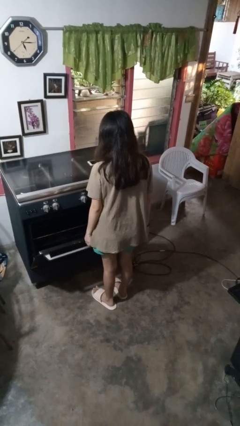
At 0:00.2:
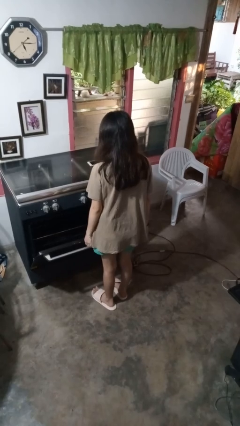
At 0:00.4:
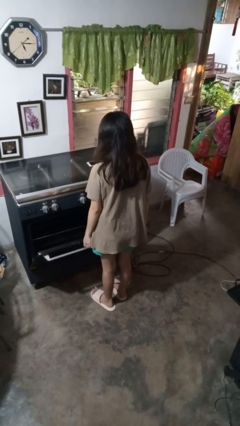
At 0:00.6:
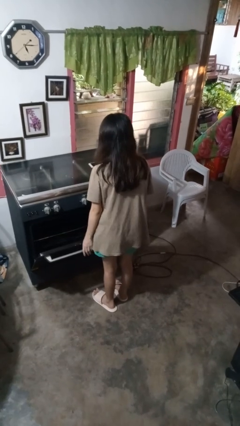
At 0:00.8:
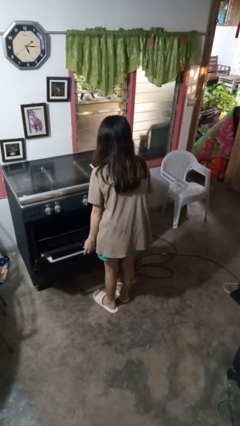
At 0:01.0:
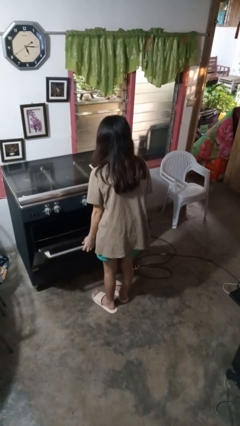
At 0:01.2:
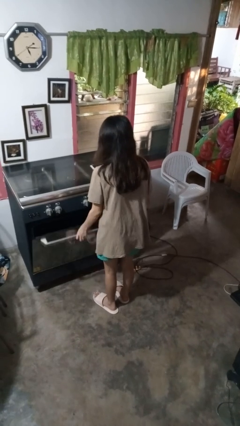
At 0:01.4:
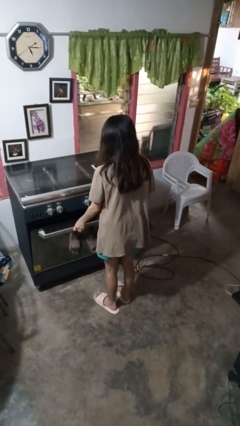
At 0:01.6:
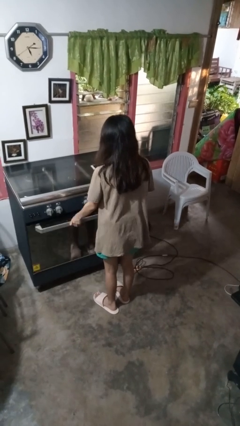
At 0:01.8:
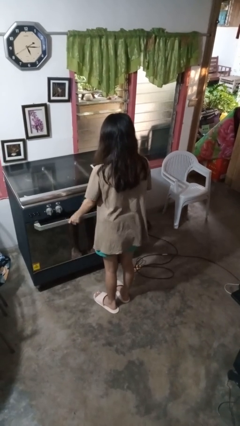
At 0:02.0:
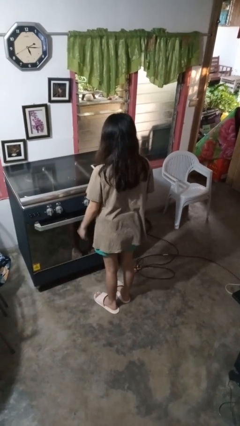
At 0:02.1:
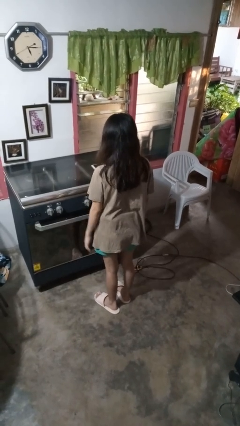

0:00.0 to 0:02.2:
person closes oven door

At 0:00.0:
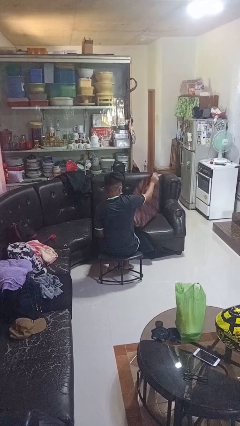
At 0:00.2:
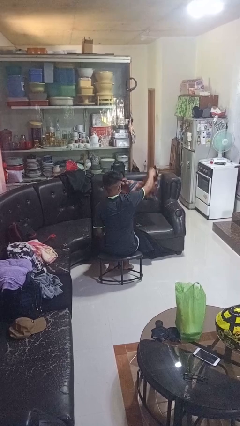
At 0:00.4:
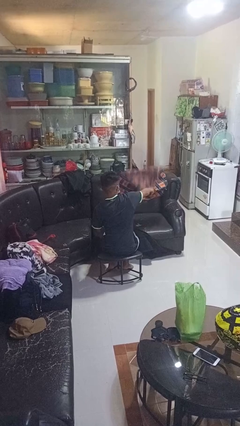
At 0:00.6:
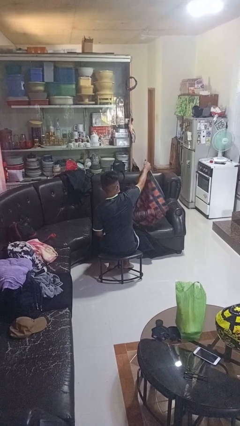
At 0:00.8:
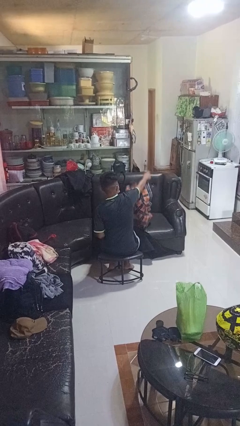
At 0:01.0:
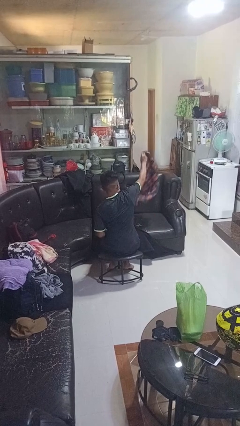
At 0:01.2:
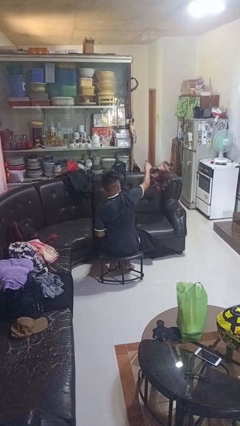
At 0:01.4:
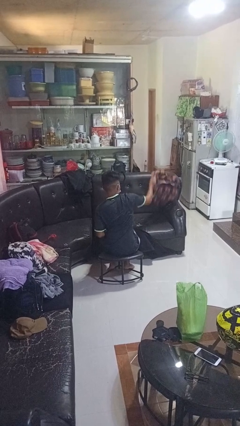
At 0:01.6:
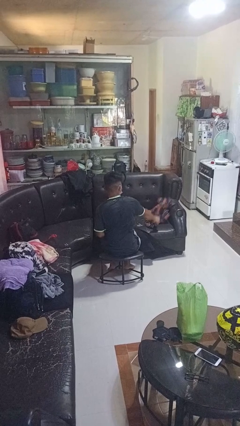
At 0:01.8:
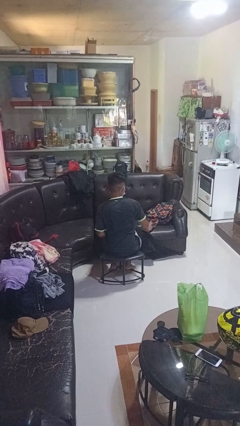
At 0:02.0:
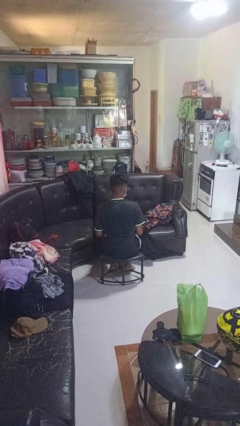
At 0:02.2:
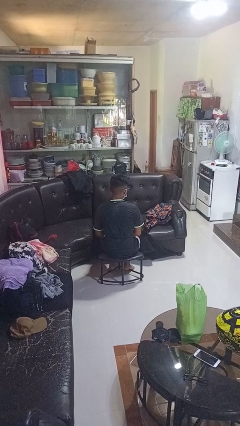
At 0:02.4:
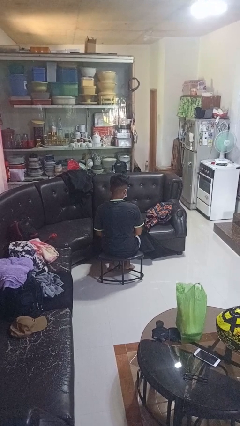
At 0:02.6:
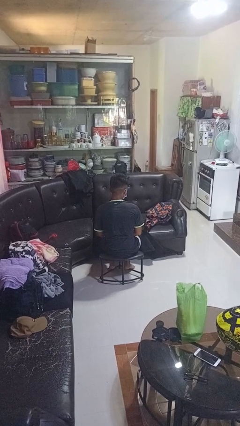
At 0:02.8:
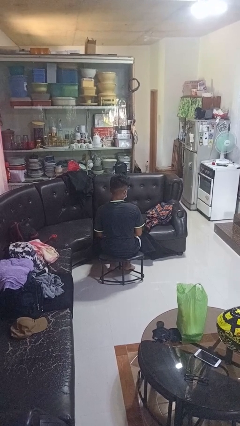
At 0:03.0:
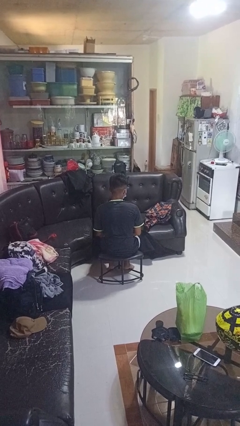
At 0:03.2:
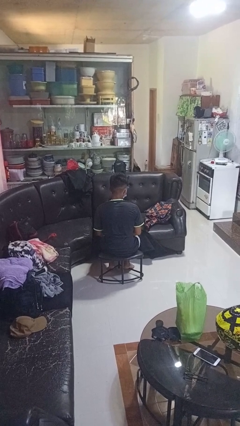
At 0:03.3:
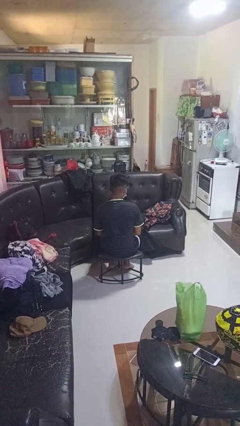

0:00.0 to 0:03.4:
person unfolds blanket

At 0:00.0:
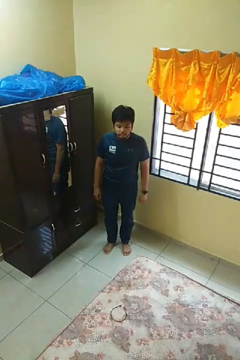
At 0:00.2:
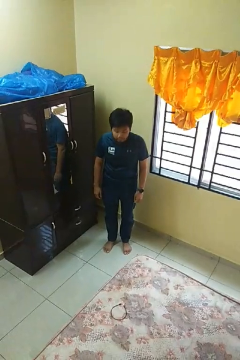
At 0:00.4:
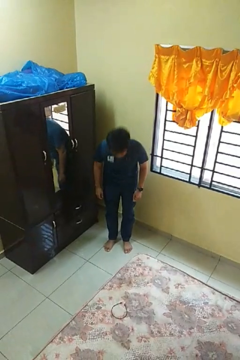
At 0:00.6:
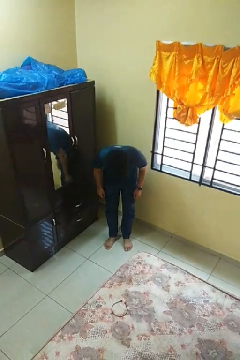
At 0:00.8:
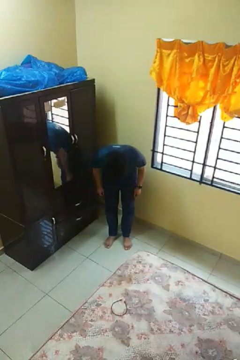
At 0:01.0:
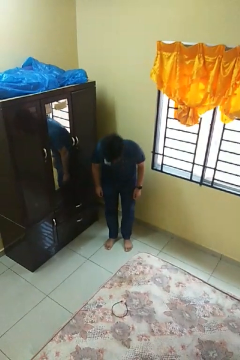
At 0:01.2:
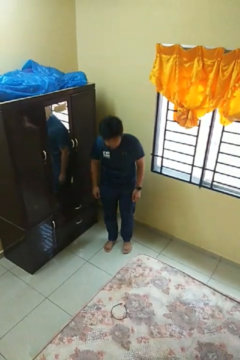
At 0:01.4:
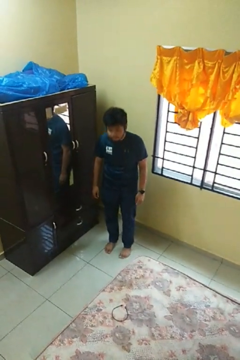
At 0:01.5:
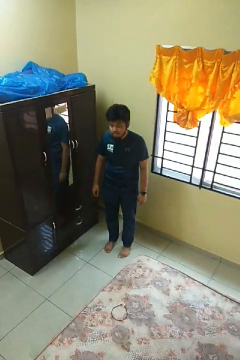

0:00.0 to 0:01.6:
person bows

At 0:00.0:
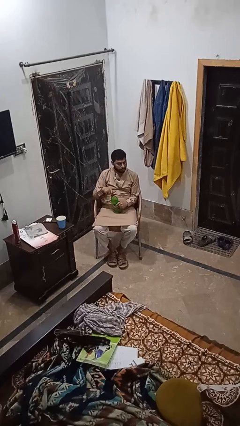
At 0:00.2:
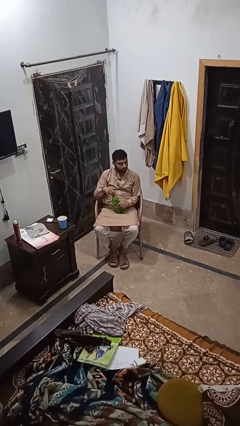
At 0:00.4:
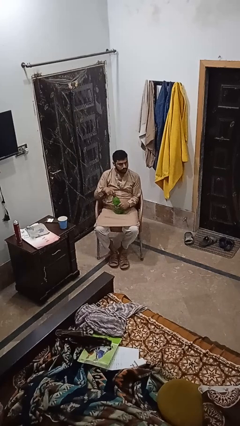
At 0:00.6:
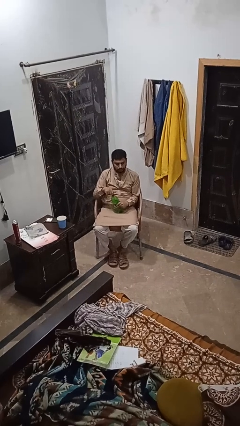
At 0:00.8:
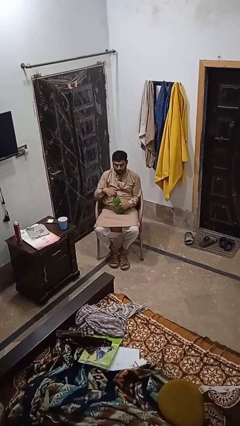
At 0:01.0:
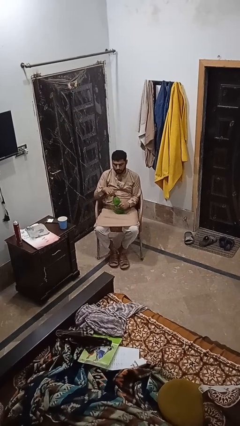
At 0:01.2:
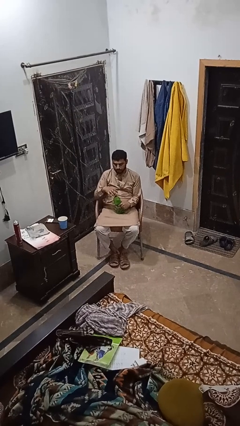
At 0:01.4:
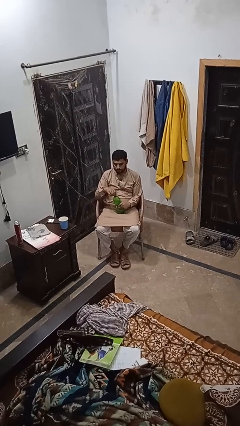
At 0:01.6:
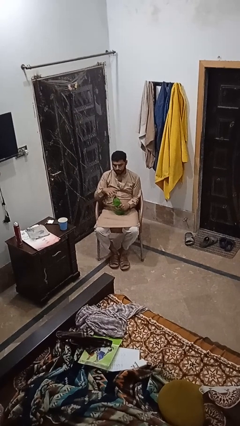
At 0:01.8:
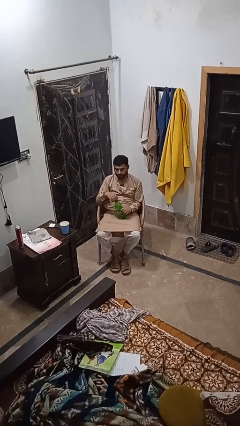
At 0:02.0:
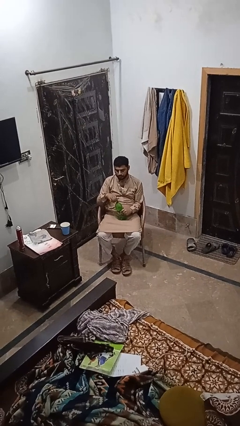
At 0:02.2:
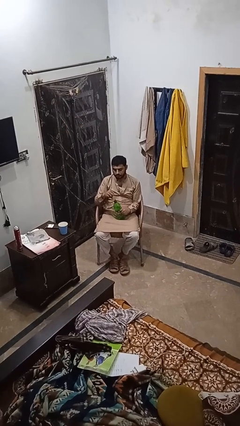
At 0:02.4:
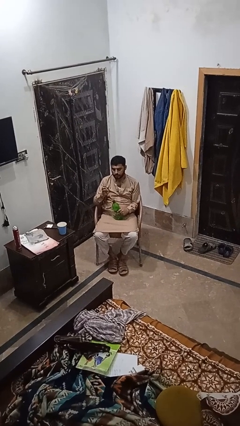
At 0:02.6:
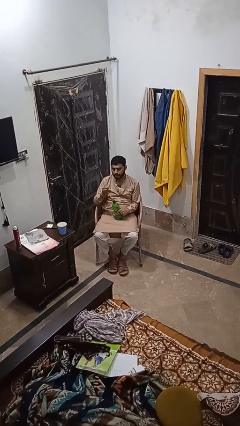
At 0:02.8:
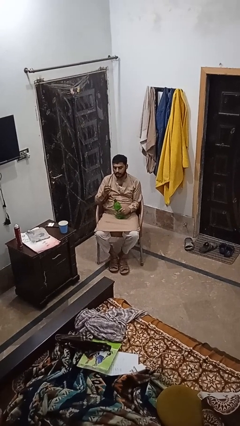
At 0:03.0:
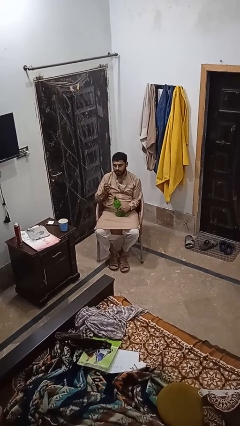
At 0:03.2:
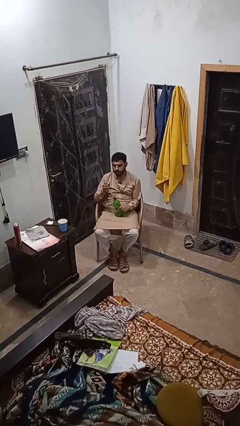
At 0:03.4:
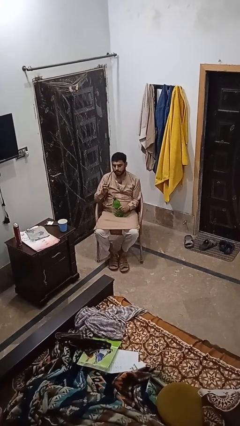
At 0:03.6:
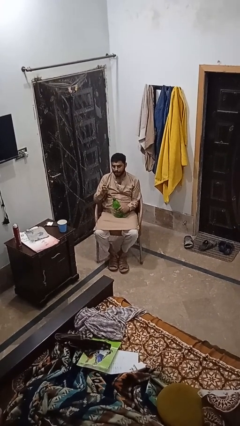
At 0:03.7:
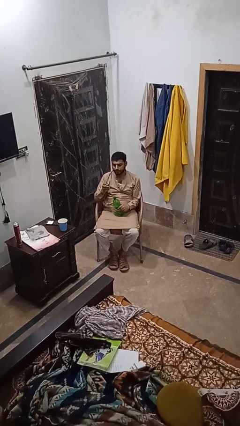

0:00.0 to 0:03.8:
person unscrews lid from bottle

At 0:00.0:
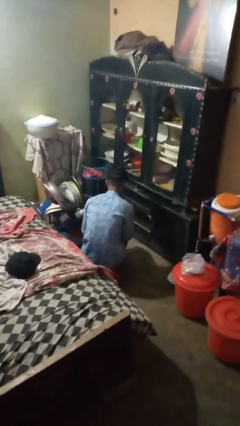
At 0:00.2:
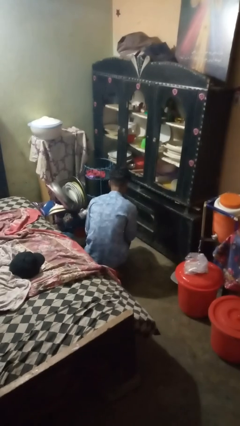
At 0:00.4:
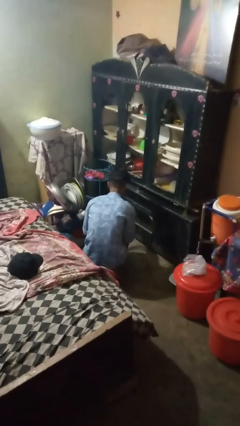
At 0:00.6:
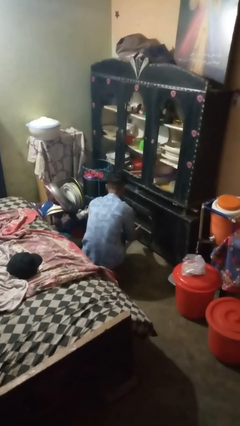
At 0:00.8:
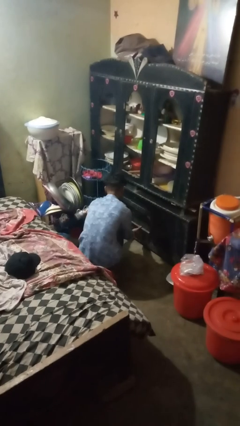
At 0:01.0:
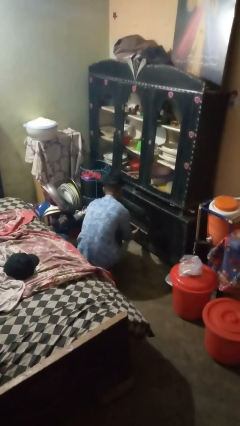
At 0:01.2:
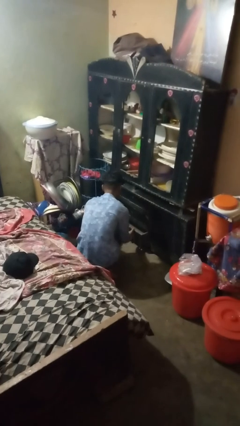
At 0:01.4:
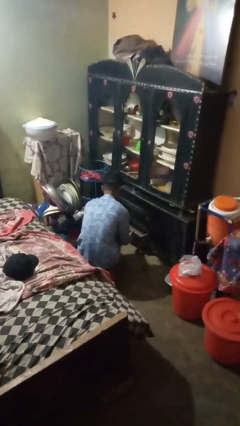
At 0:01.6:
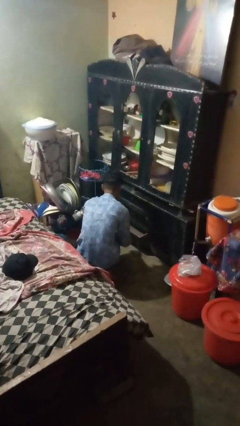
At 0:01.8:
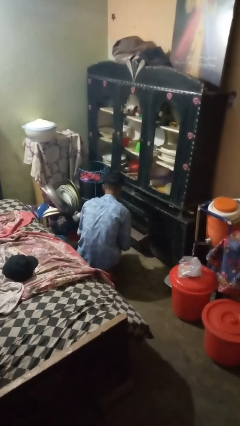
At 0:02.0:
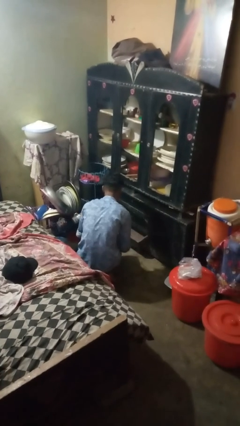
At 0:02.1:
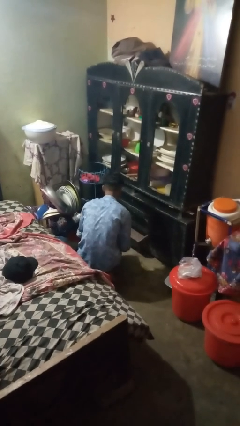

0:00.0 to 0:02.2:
person opens kitchen drawer

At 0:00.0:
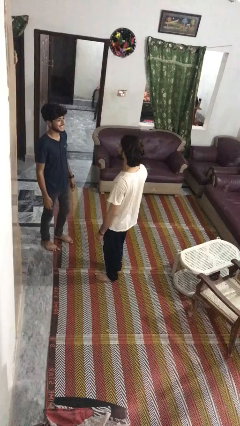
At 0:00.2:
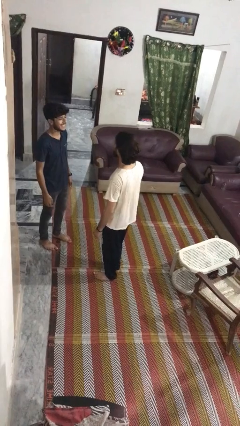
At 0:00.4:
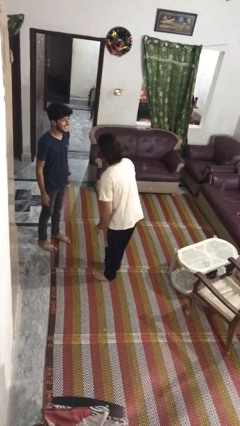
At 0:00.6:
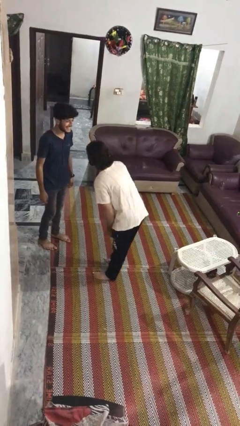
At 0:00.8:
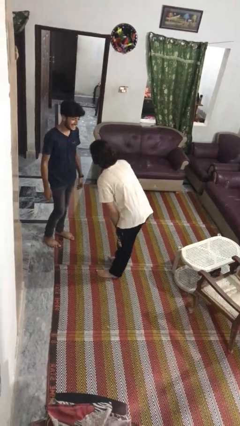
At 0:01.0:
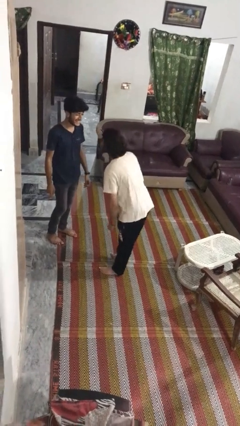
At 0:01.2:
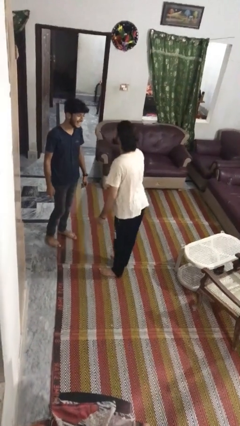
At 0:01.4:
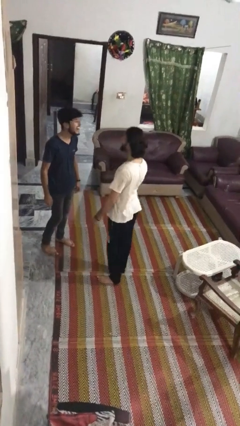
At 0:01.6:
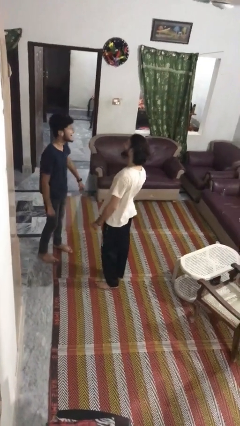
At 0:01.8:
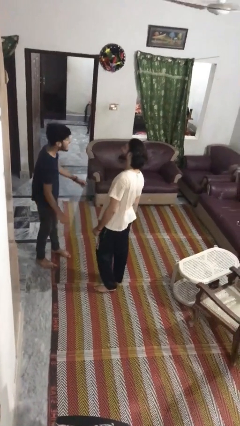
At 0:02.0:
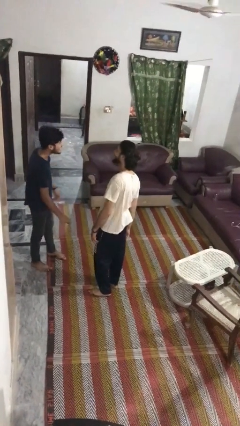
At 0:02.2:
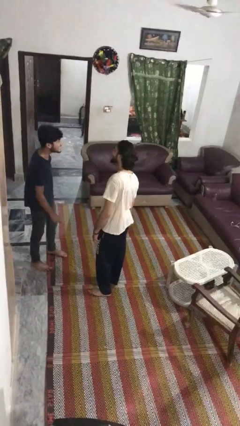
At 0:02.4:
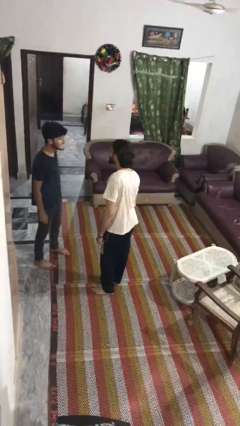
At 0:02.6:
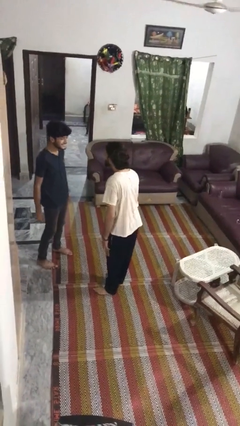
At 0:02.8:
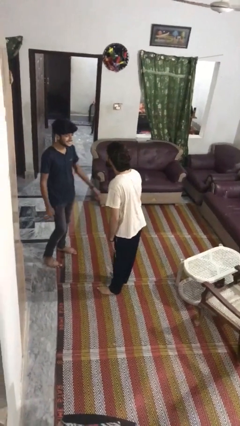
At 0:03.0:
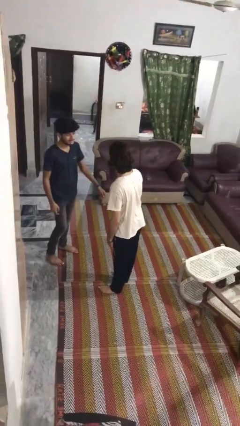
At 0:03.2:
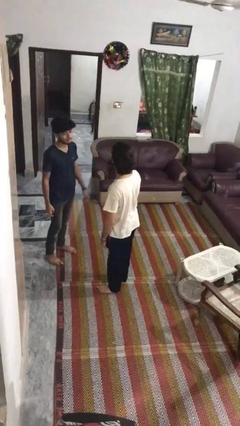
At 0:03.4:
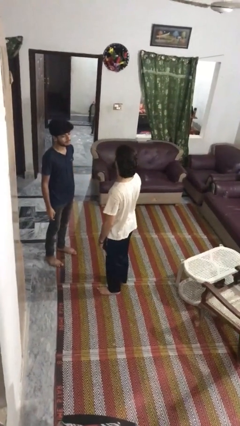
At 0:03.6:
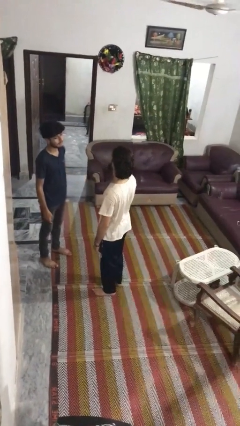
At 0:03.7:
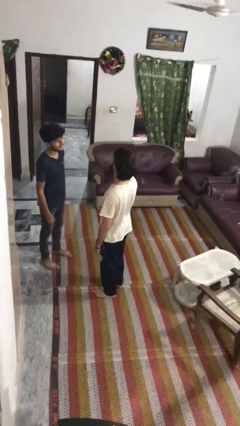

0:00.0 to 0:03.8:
person laughs with person

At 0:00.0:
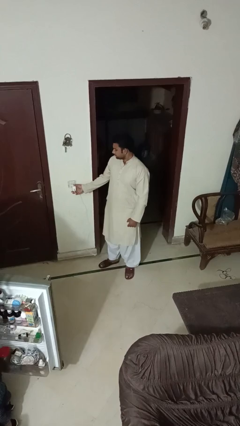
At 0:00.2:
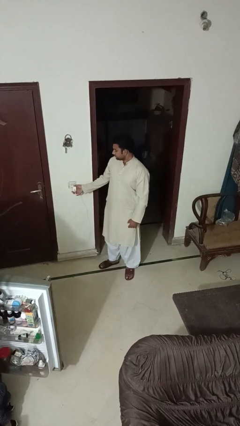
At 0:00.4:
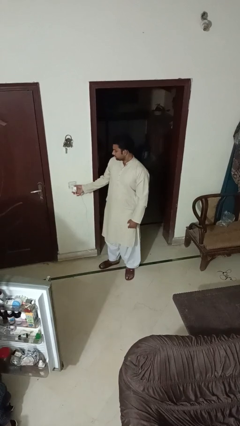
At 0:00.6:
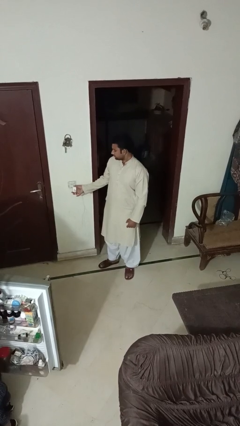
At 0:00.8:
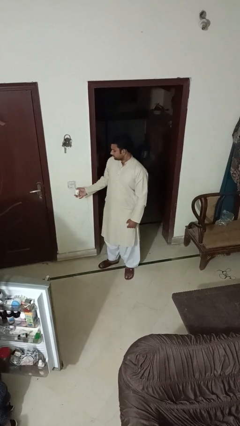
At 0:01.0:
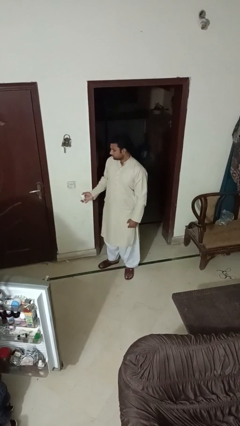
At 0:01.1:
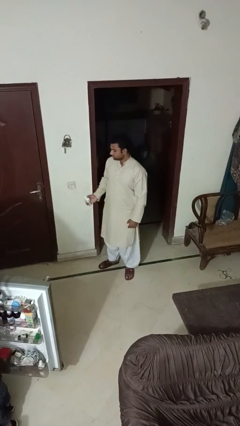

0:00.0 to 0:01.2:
person unplugs from electrical socket
